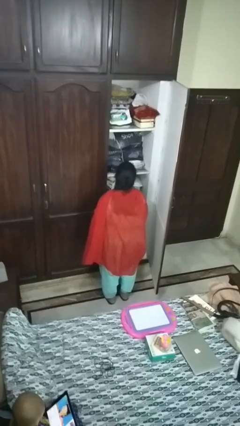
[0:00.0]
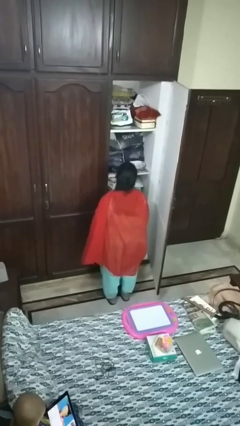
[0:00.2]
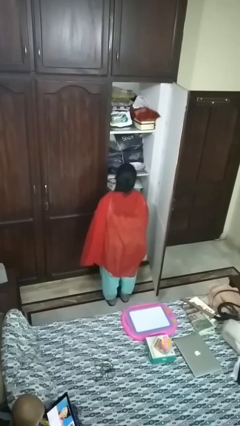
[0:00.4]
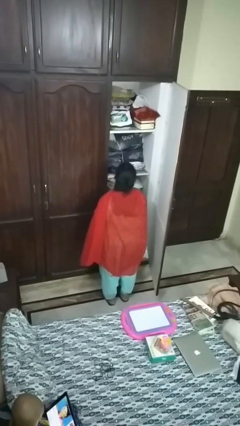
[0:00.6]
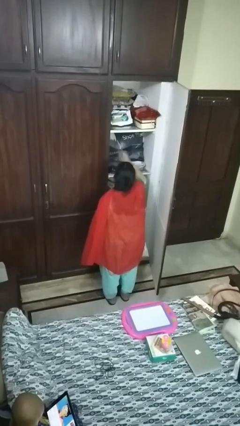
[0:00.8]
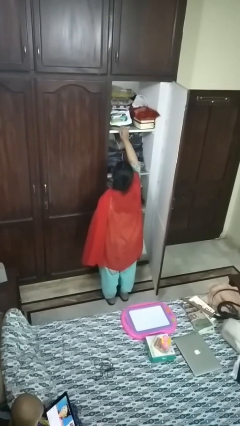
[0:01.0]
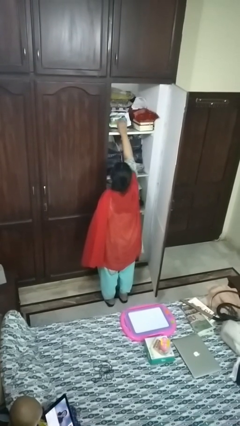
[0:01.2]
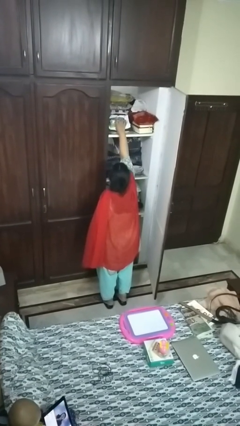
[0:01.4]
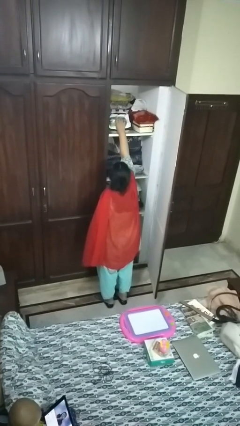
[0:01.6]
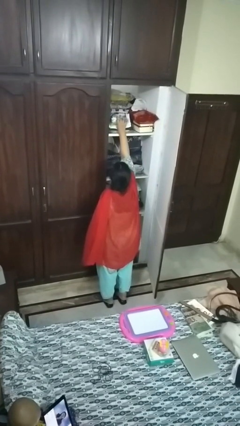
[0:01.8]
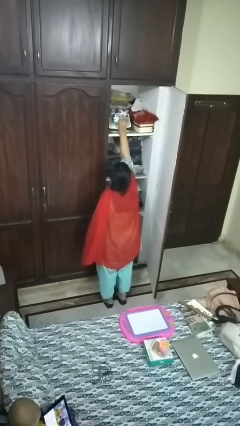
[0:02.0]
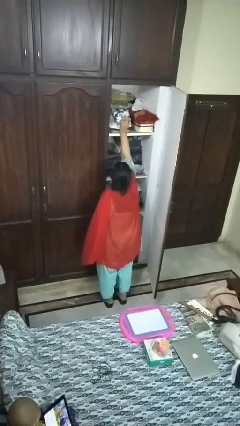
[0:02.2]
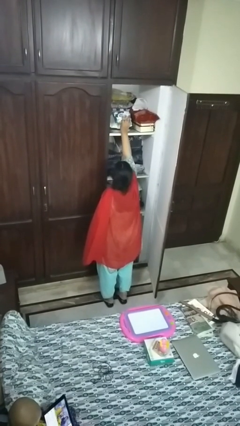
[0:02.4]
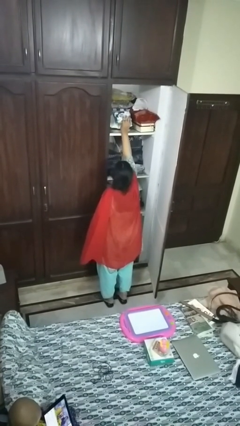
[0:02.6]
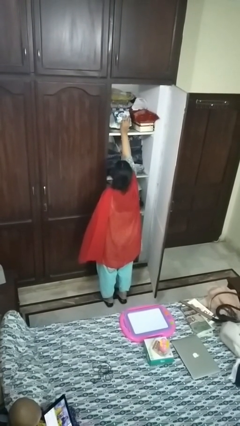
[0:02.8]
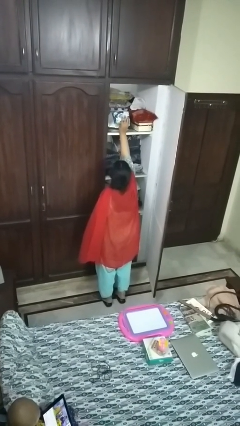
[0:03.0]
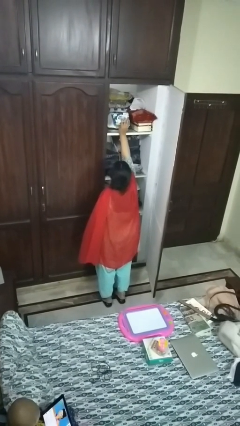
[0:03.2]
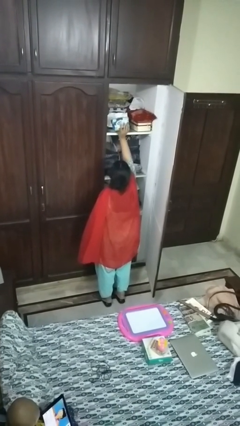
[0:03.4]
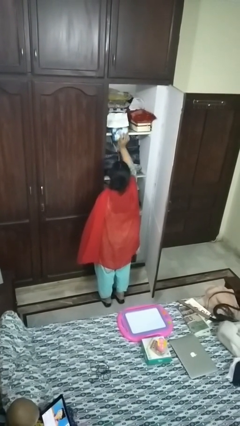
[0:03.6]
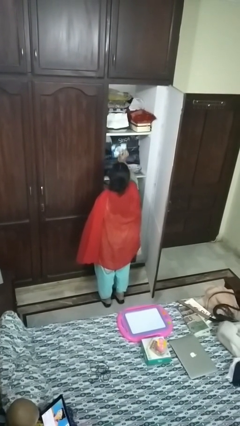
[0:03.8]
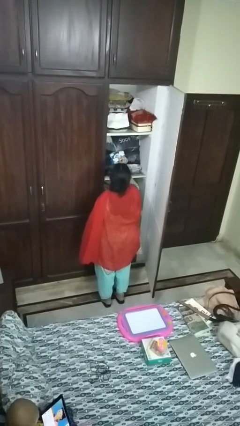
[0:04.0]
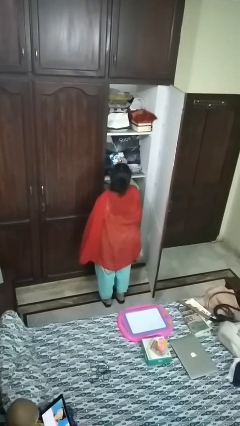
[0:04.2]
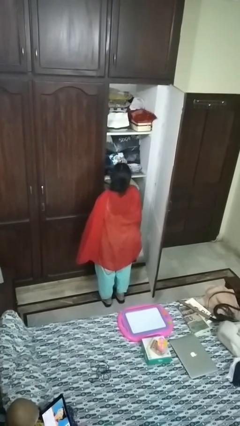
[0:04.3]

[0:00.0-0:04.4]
person picks up object from countertop

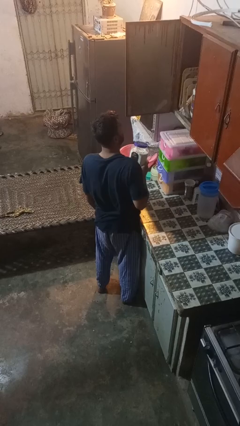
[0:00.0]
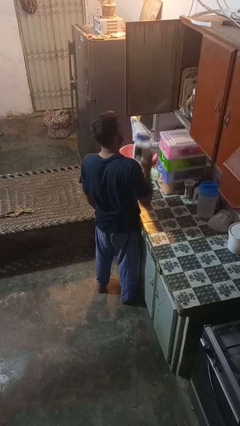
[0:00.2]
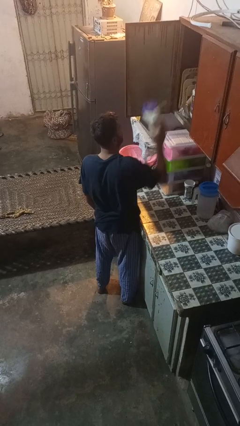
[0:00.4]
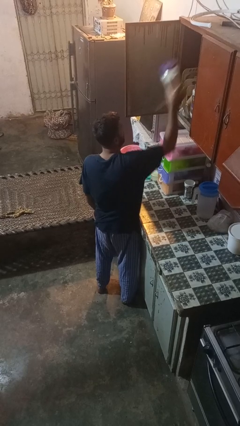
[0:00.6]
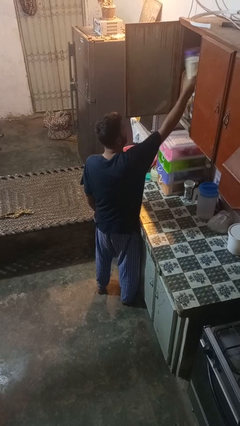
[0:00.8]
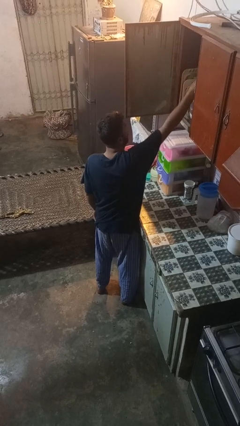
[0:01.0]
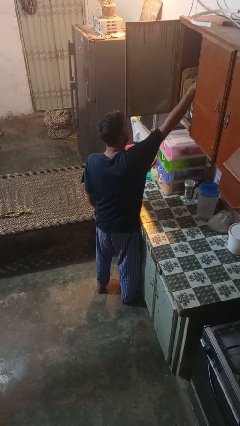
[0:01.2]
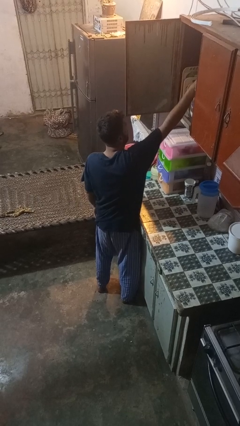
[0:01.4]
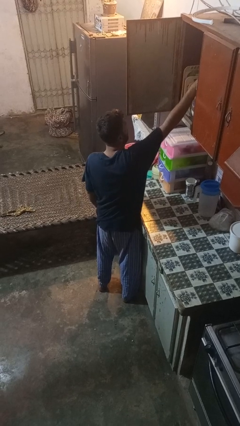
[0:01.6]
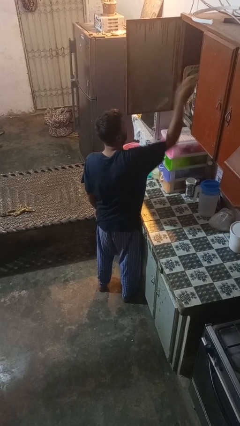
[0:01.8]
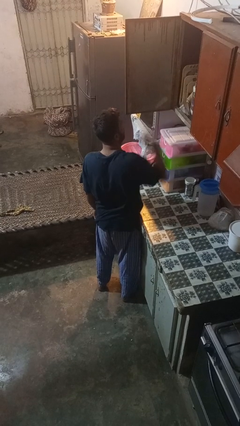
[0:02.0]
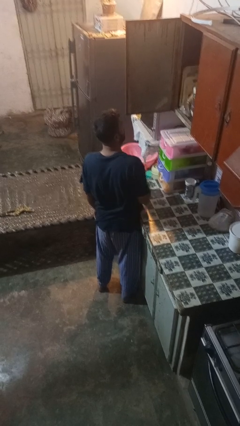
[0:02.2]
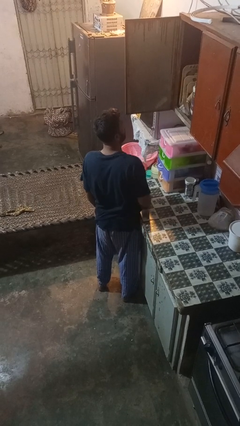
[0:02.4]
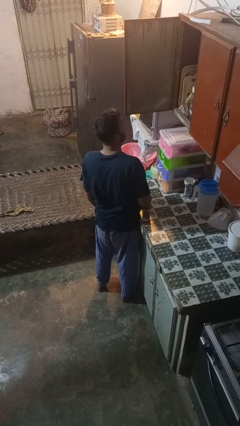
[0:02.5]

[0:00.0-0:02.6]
person takes object from cabinet

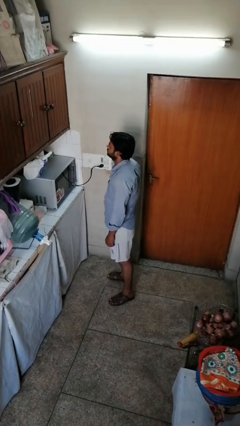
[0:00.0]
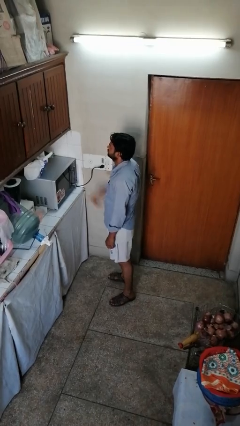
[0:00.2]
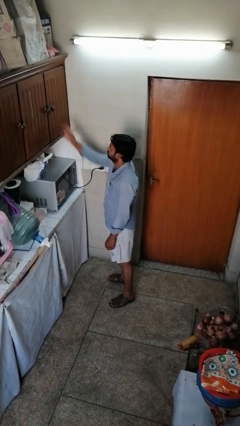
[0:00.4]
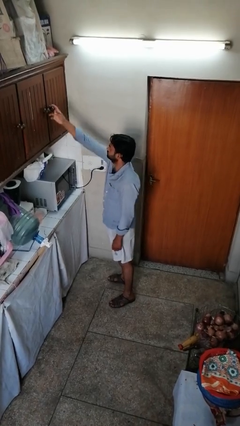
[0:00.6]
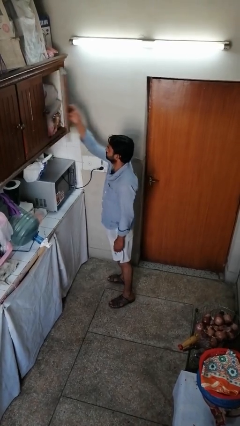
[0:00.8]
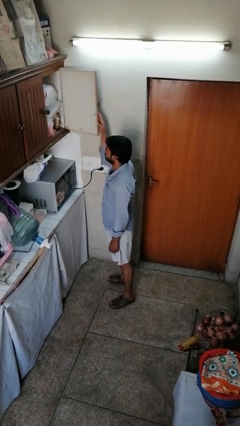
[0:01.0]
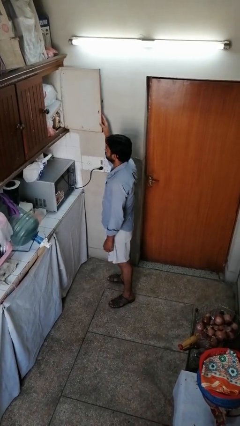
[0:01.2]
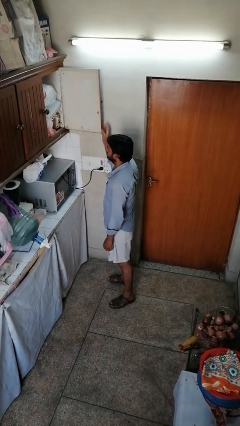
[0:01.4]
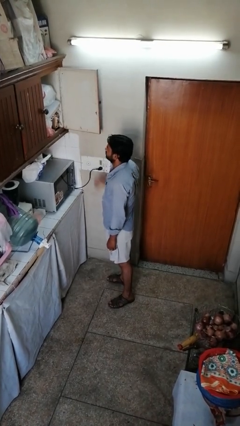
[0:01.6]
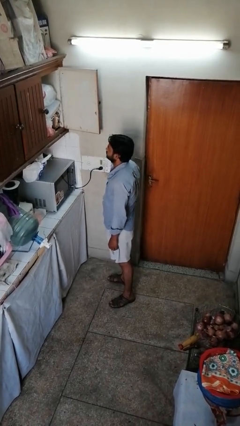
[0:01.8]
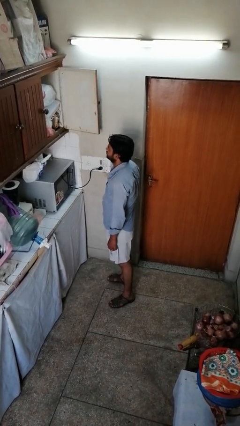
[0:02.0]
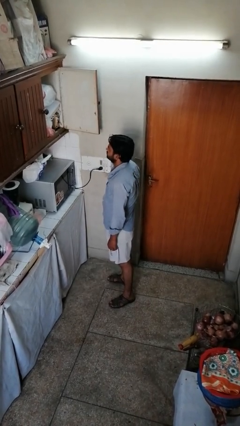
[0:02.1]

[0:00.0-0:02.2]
person opens cabinet

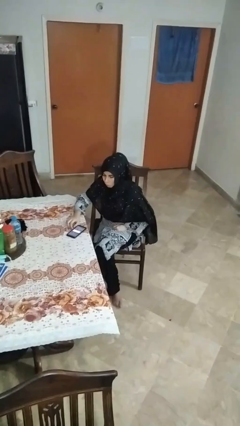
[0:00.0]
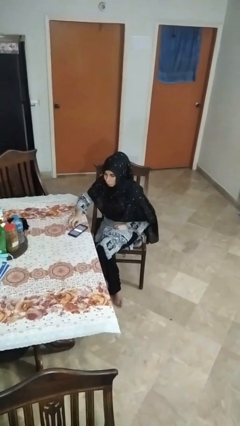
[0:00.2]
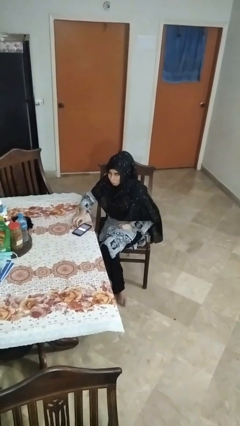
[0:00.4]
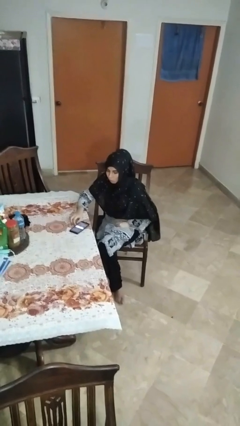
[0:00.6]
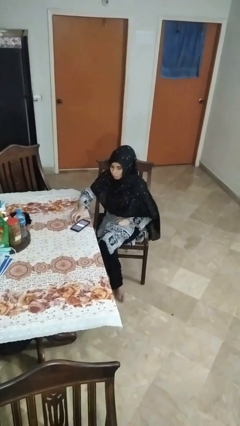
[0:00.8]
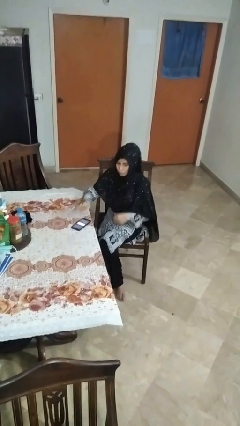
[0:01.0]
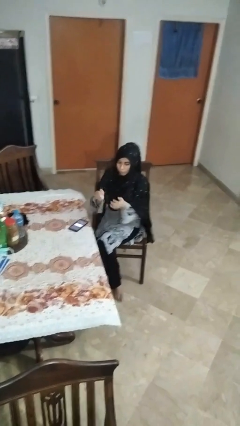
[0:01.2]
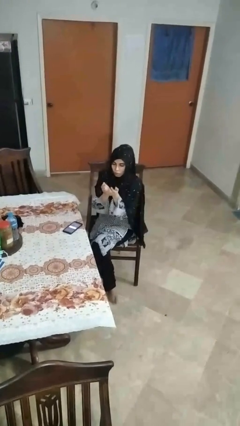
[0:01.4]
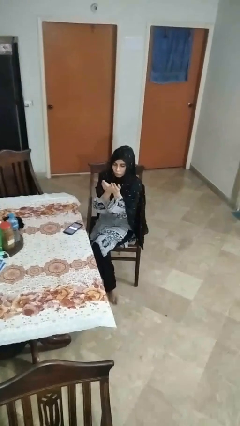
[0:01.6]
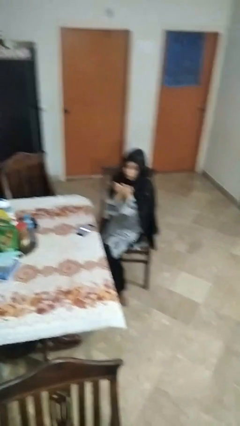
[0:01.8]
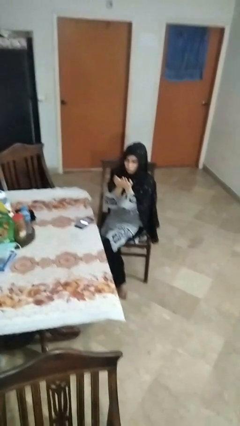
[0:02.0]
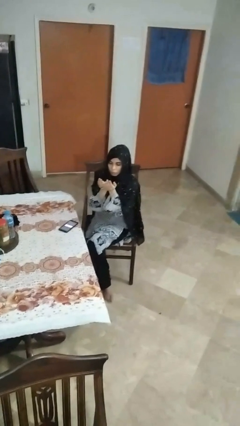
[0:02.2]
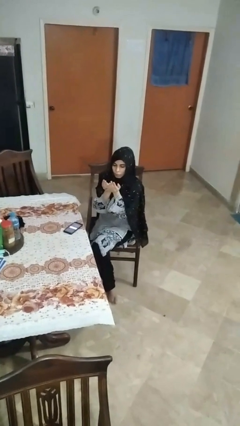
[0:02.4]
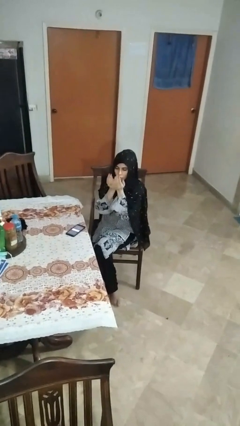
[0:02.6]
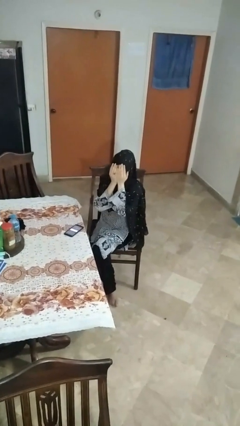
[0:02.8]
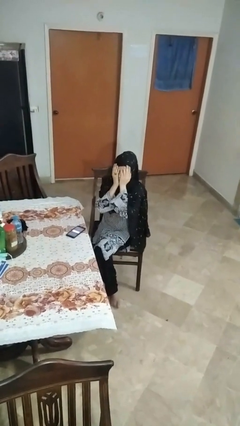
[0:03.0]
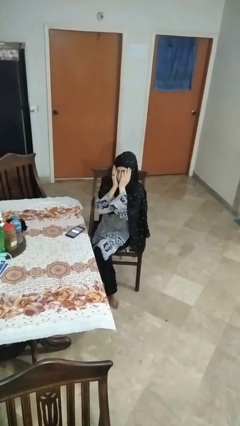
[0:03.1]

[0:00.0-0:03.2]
person prays

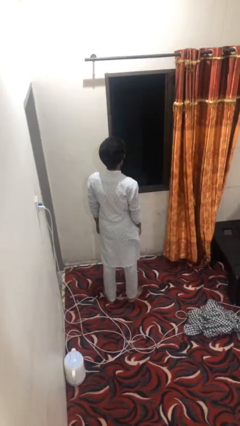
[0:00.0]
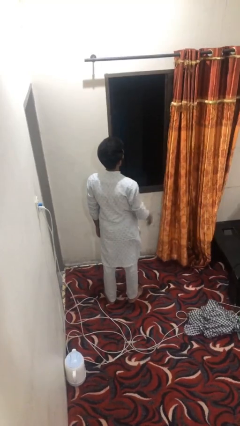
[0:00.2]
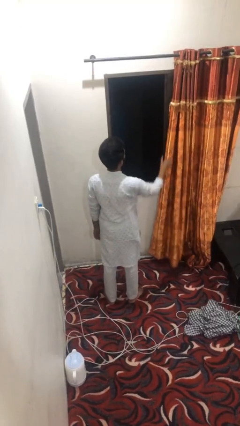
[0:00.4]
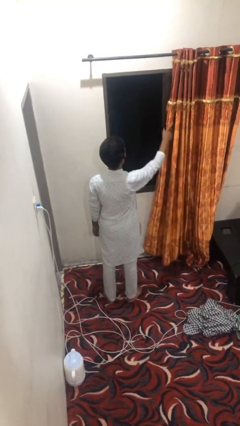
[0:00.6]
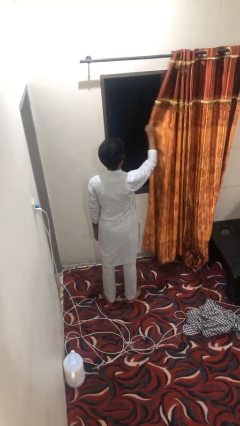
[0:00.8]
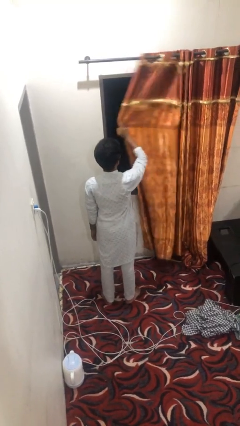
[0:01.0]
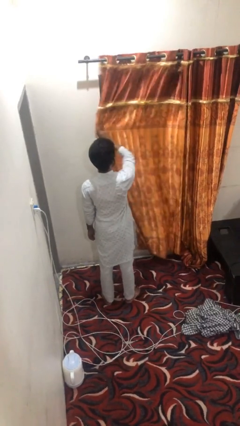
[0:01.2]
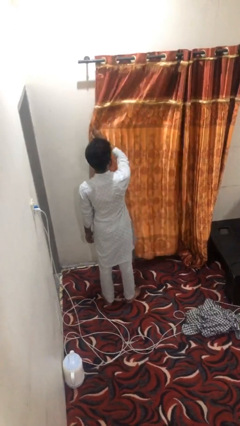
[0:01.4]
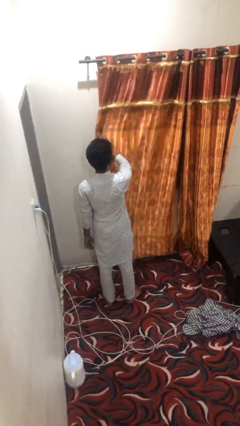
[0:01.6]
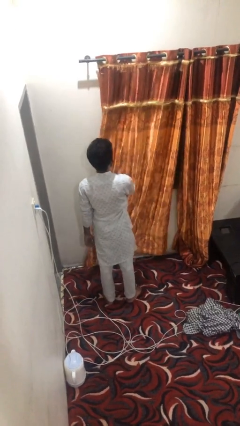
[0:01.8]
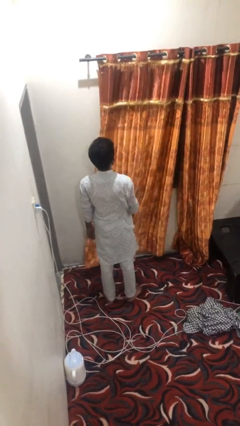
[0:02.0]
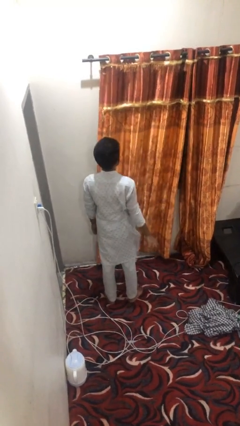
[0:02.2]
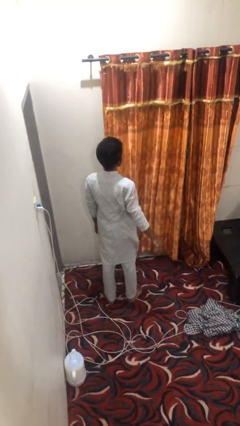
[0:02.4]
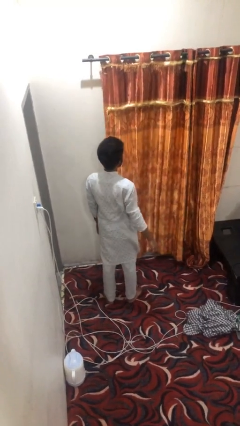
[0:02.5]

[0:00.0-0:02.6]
person closes curtains

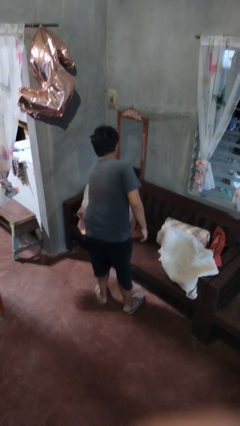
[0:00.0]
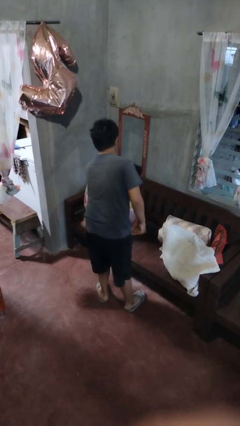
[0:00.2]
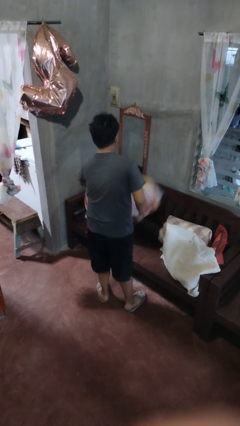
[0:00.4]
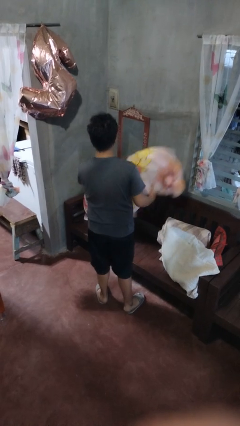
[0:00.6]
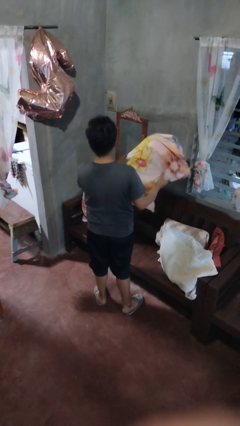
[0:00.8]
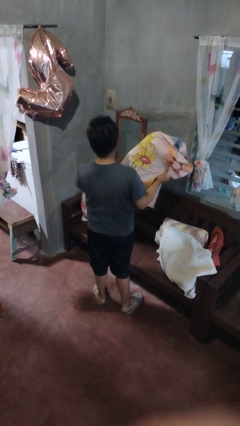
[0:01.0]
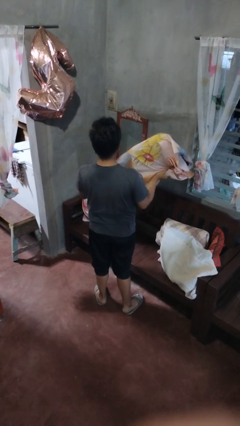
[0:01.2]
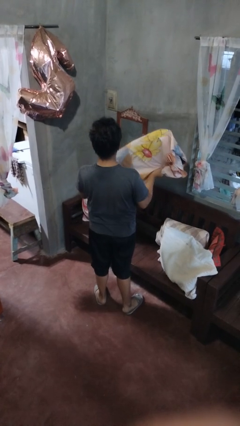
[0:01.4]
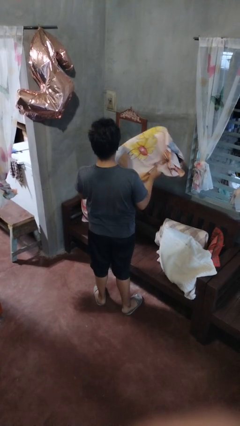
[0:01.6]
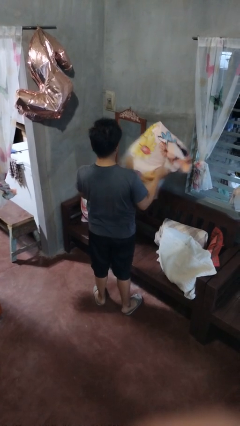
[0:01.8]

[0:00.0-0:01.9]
person picks up object from couch

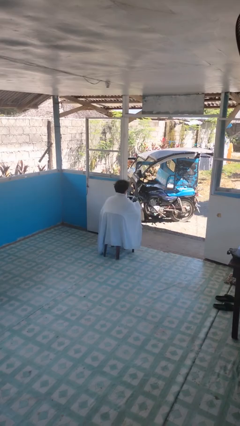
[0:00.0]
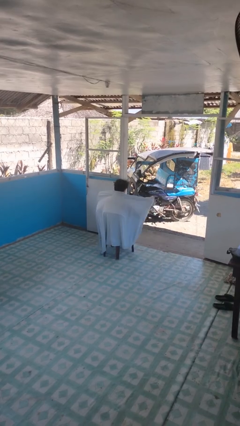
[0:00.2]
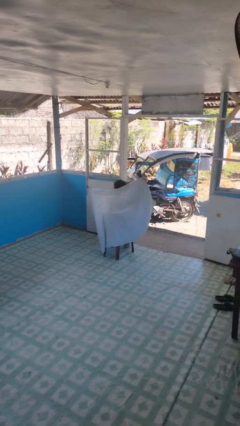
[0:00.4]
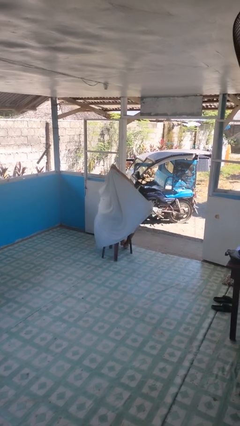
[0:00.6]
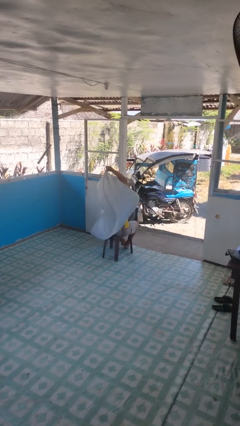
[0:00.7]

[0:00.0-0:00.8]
person uncovers with blanket
